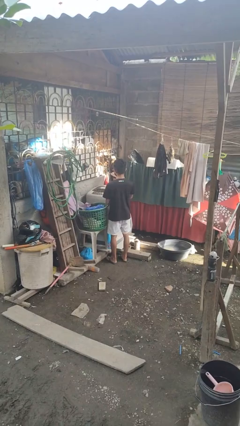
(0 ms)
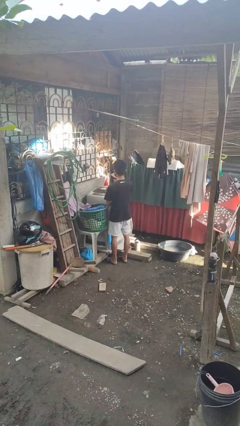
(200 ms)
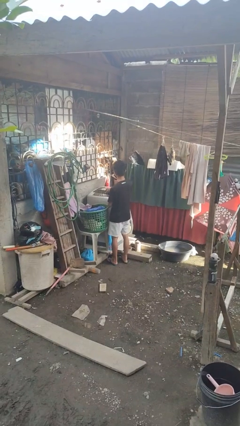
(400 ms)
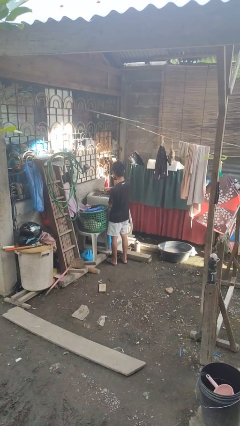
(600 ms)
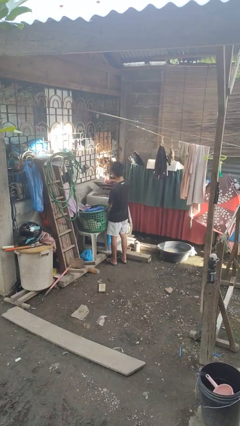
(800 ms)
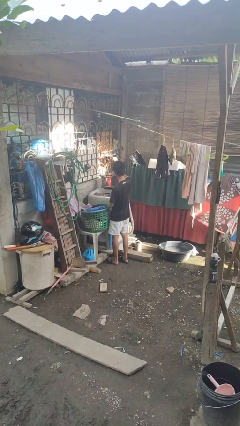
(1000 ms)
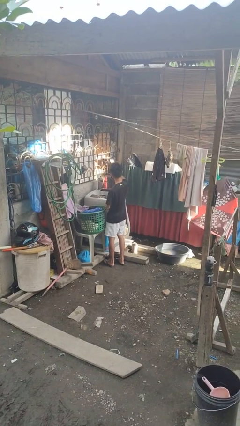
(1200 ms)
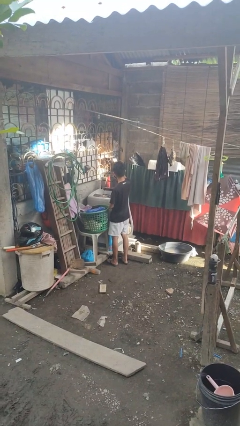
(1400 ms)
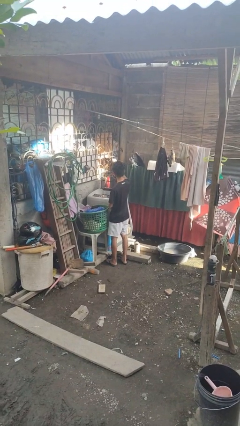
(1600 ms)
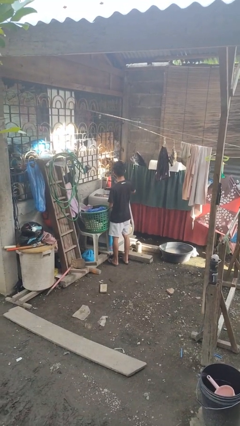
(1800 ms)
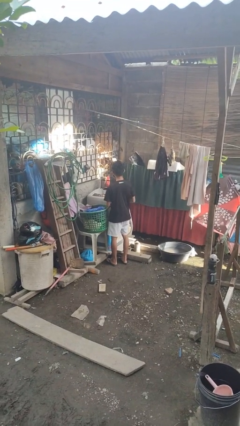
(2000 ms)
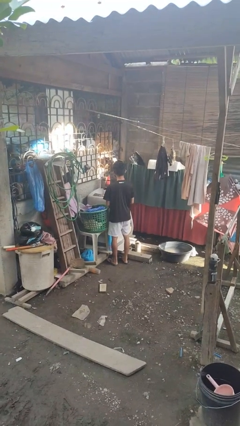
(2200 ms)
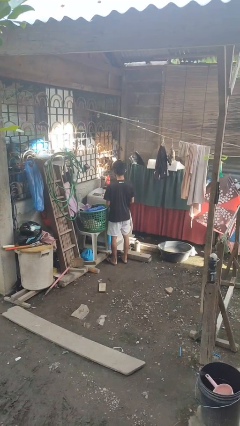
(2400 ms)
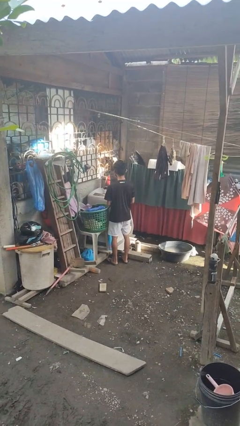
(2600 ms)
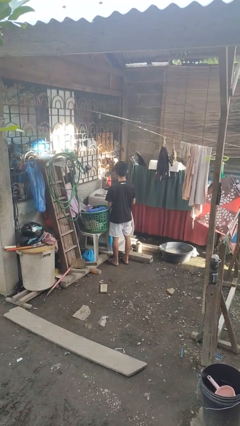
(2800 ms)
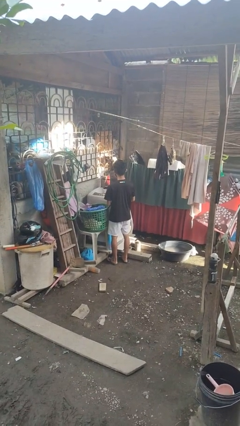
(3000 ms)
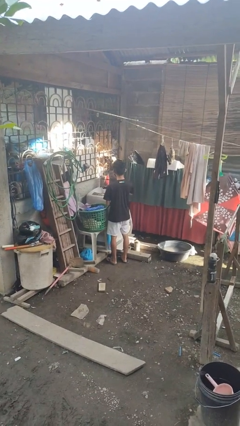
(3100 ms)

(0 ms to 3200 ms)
person opens clothes washer

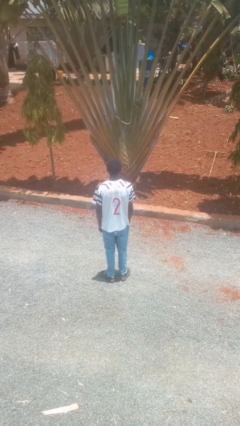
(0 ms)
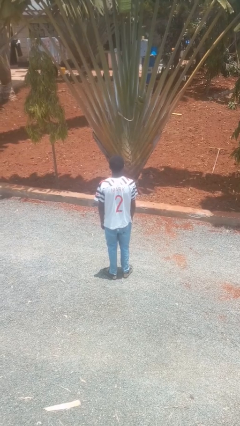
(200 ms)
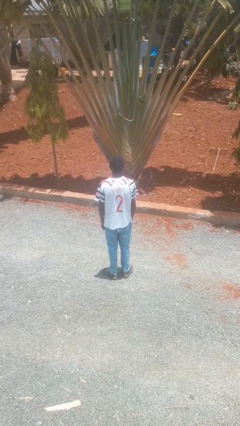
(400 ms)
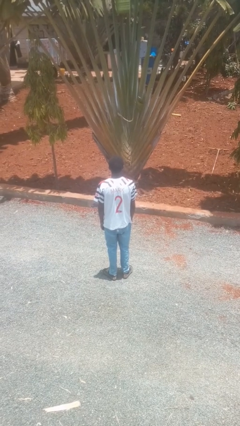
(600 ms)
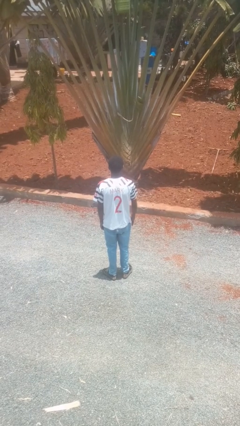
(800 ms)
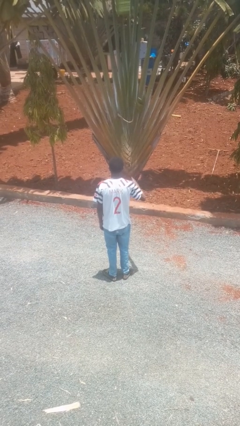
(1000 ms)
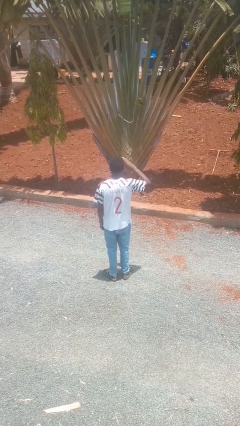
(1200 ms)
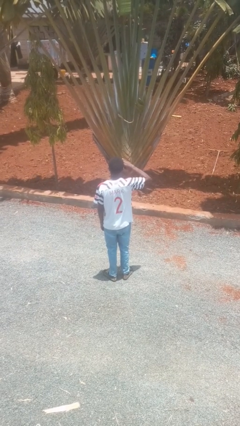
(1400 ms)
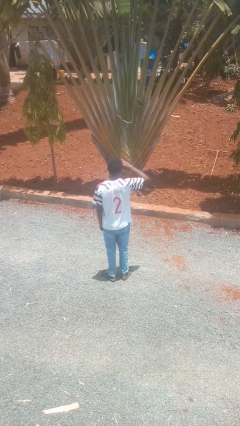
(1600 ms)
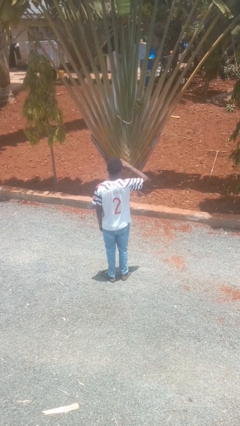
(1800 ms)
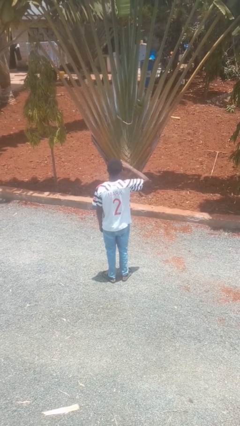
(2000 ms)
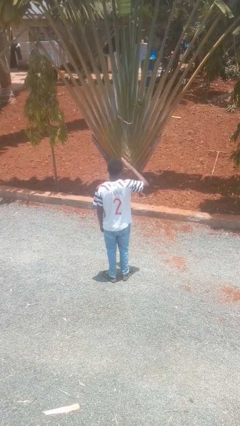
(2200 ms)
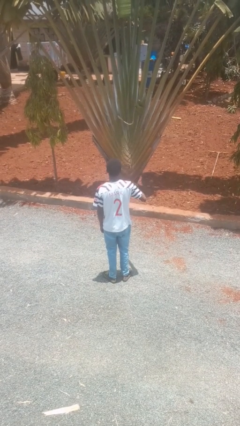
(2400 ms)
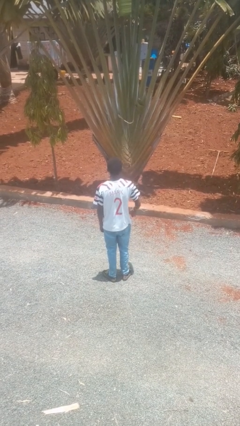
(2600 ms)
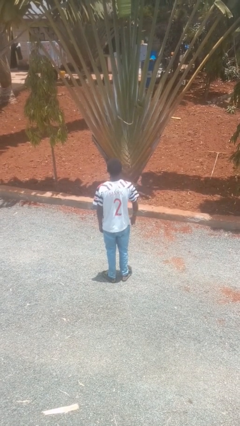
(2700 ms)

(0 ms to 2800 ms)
person salutes

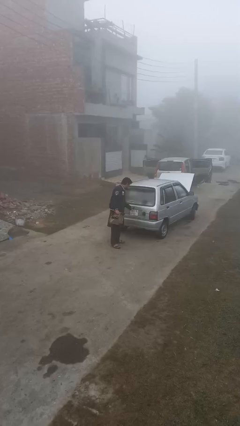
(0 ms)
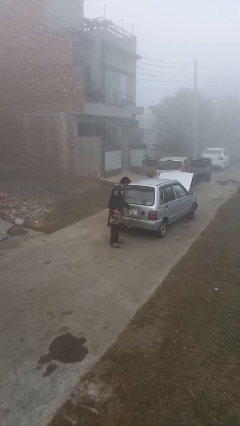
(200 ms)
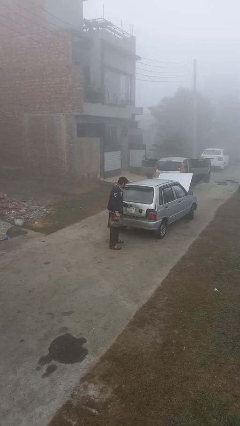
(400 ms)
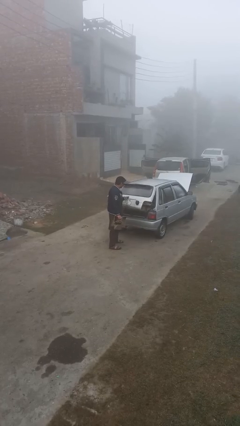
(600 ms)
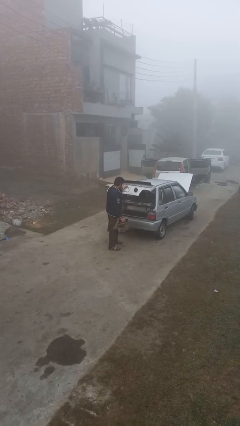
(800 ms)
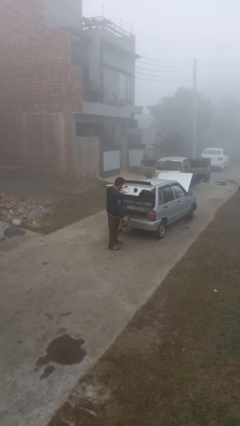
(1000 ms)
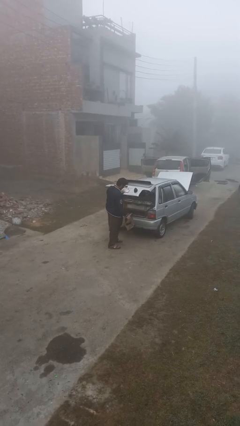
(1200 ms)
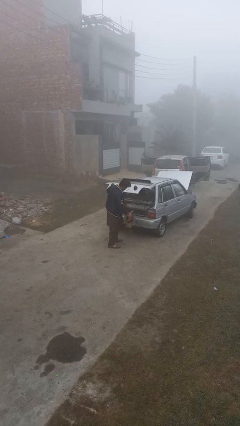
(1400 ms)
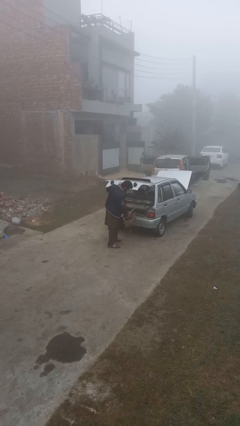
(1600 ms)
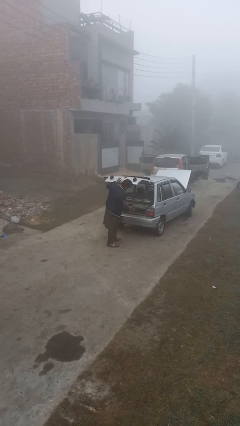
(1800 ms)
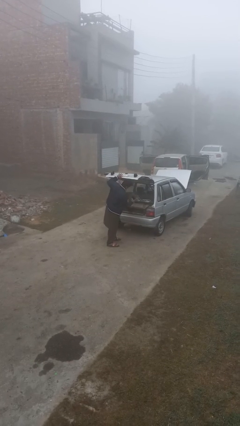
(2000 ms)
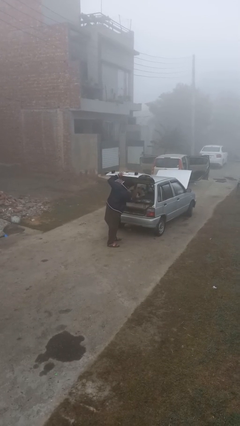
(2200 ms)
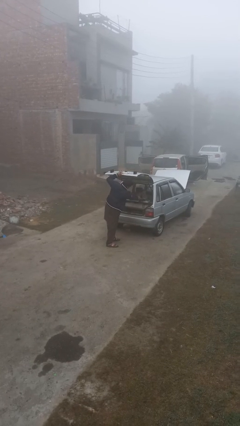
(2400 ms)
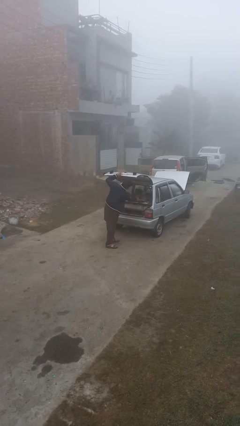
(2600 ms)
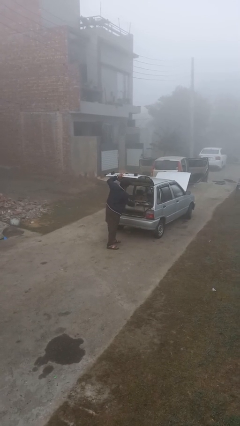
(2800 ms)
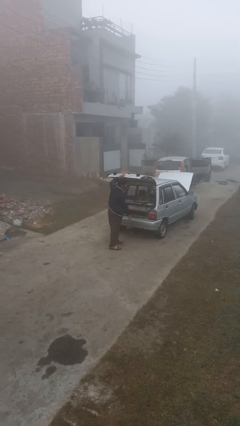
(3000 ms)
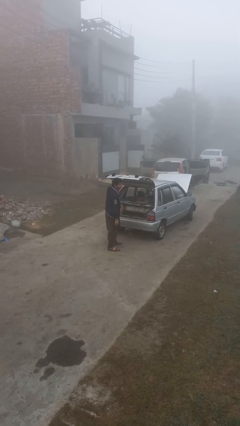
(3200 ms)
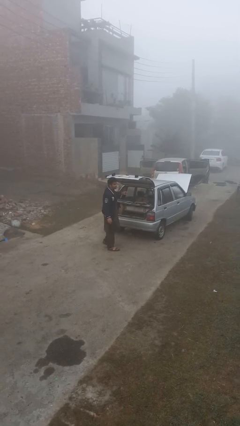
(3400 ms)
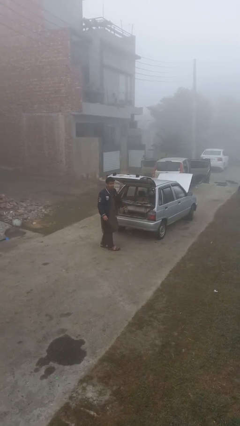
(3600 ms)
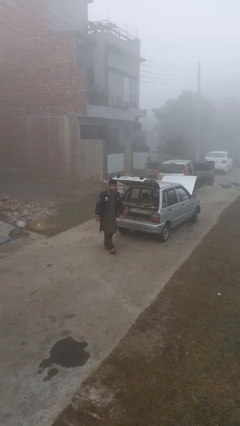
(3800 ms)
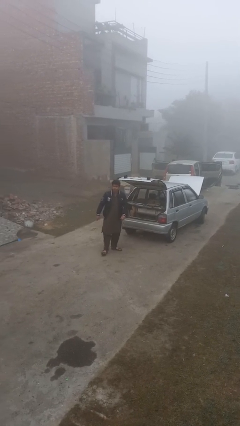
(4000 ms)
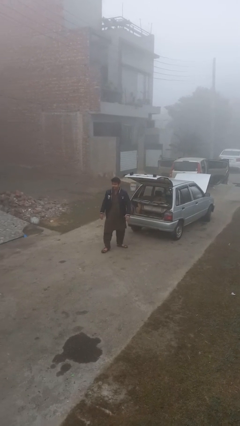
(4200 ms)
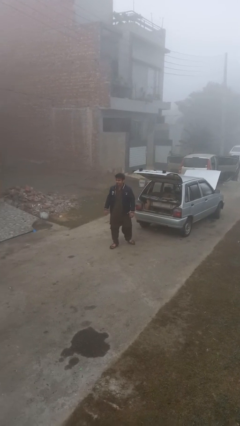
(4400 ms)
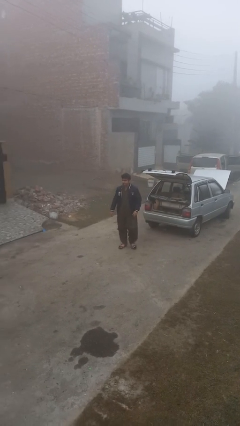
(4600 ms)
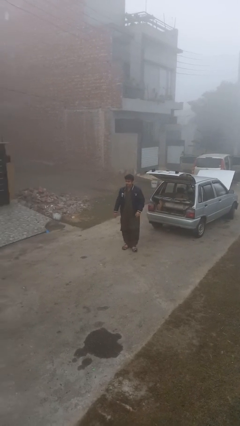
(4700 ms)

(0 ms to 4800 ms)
person loads car

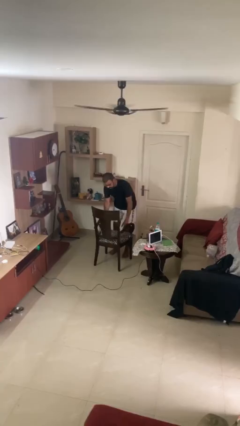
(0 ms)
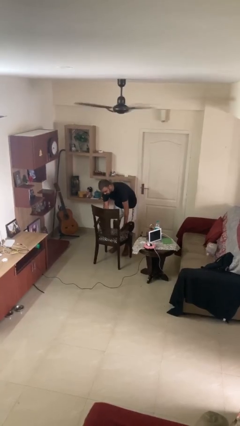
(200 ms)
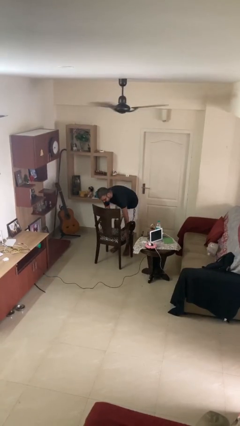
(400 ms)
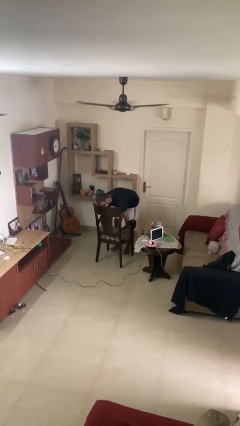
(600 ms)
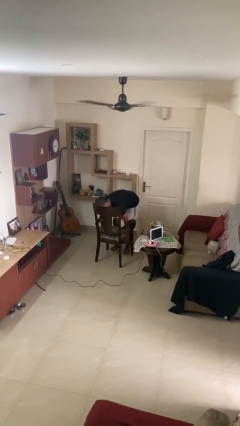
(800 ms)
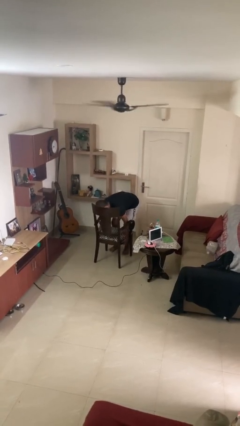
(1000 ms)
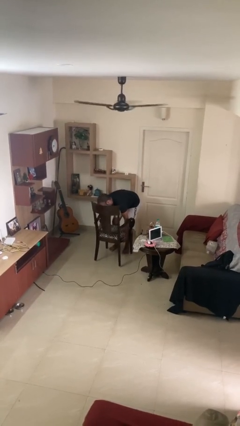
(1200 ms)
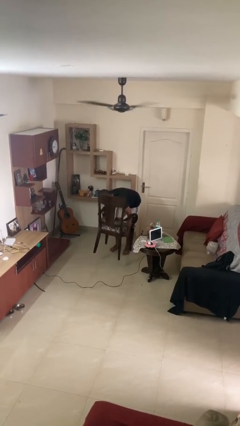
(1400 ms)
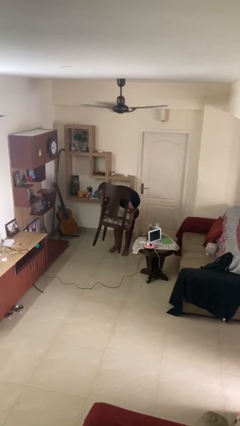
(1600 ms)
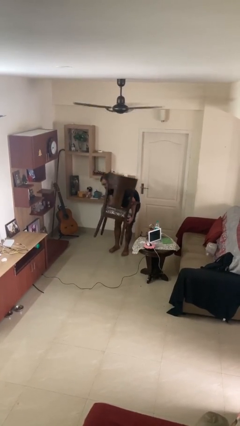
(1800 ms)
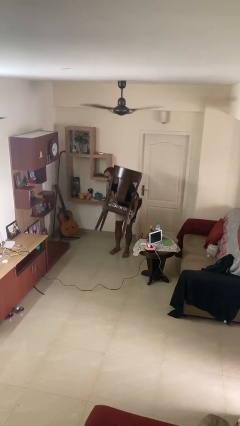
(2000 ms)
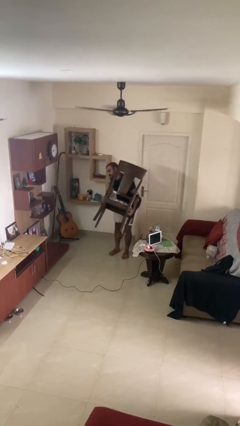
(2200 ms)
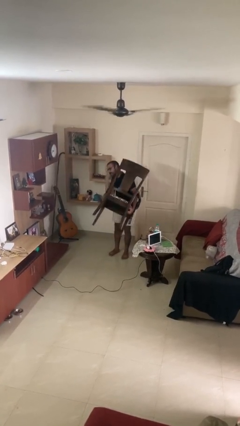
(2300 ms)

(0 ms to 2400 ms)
person picks up object from floor

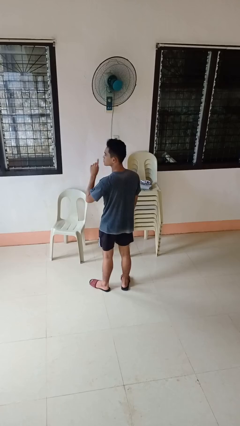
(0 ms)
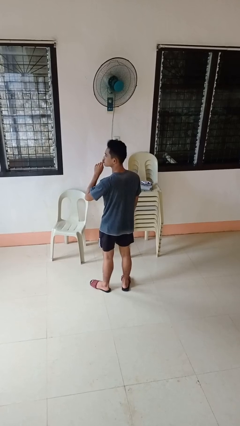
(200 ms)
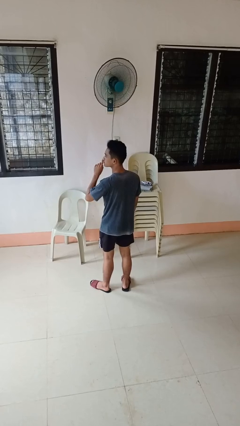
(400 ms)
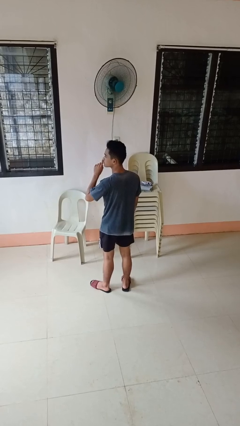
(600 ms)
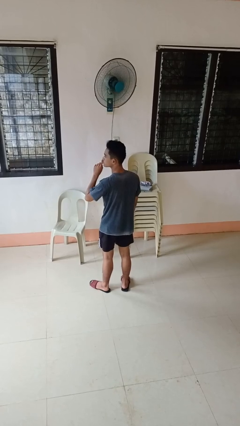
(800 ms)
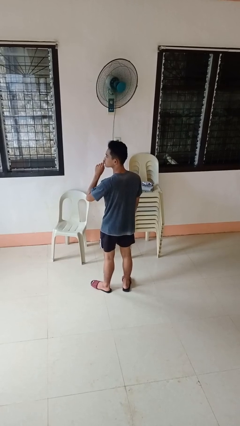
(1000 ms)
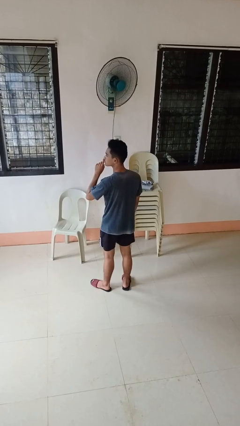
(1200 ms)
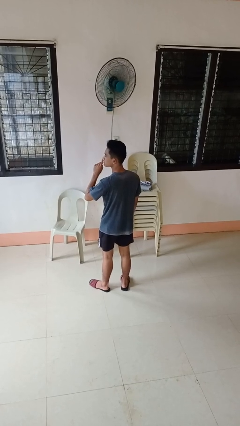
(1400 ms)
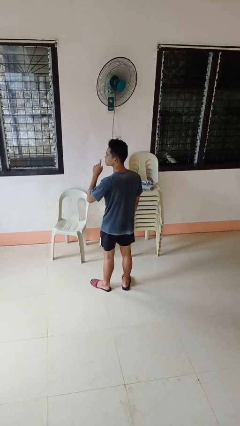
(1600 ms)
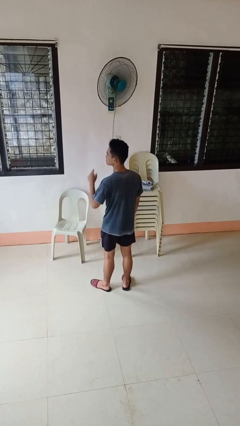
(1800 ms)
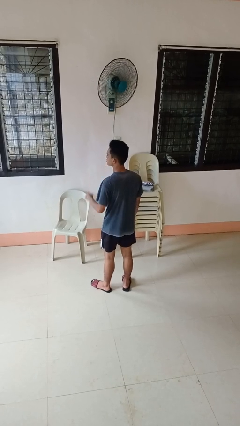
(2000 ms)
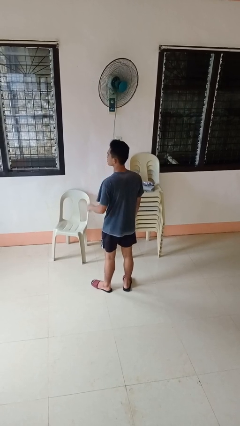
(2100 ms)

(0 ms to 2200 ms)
person gestures be quiet

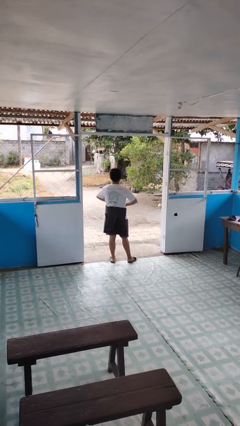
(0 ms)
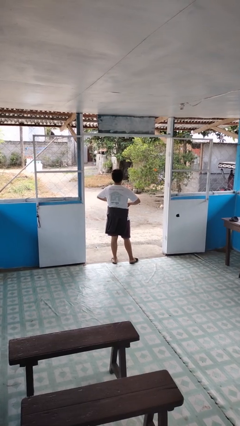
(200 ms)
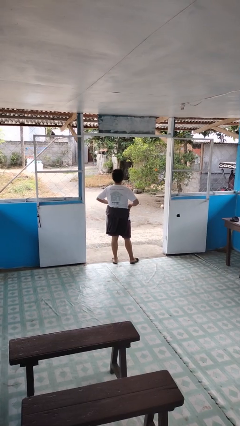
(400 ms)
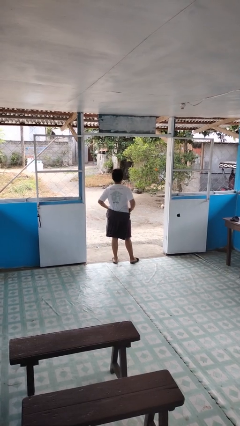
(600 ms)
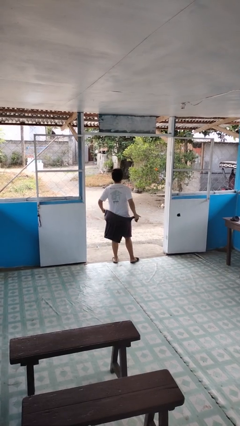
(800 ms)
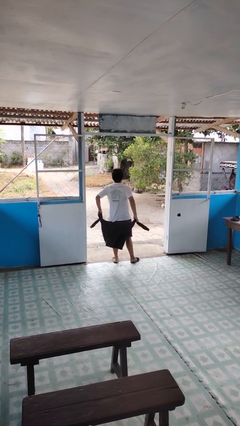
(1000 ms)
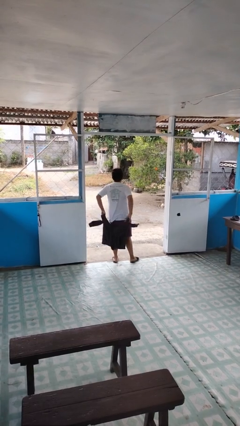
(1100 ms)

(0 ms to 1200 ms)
person unties jacket around waist

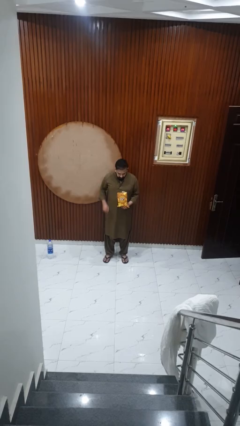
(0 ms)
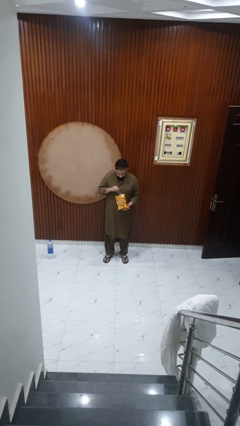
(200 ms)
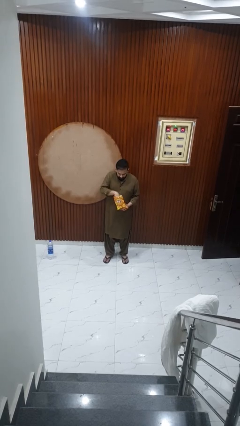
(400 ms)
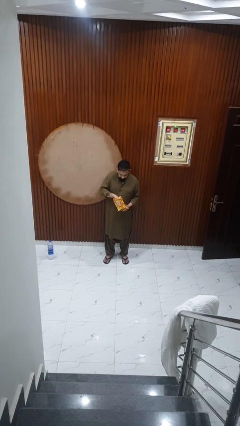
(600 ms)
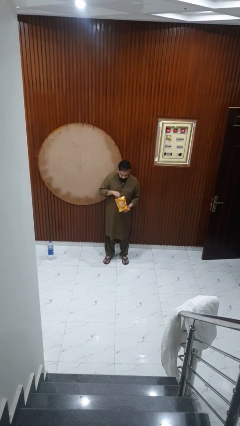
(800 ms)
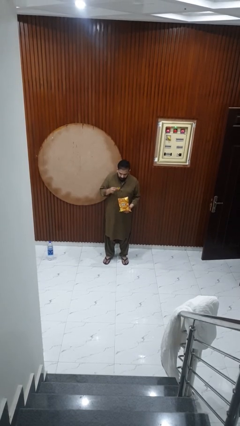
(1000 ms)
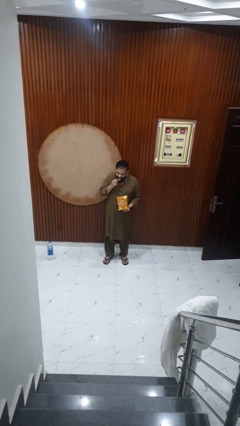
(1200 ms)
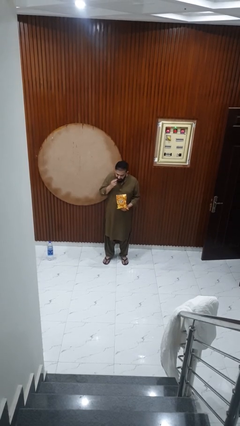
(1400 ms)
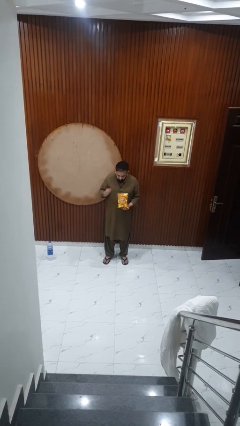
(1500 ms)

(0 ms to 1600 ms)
person eats snack from bag
